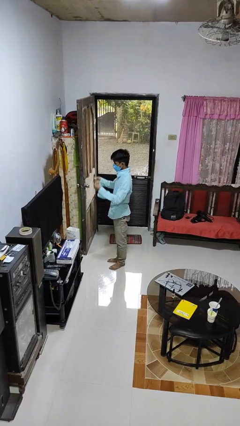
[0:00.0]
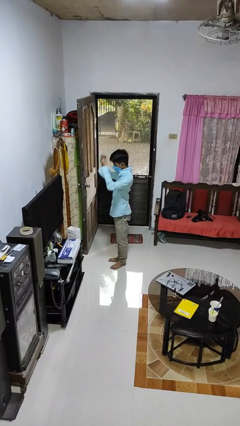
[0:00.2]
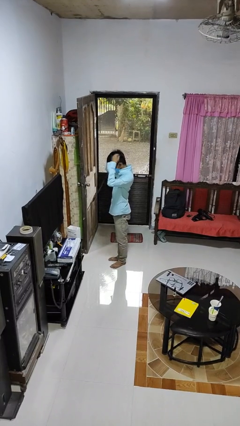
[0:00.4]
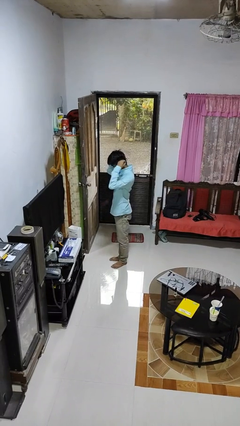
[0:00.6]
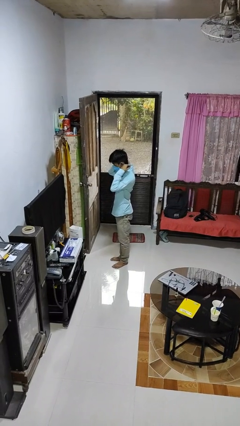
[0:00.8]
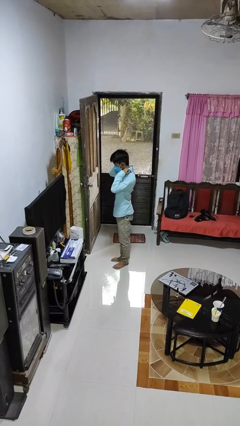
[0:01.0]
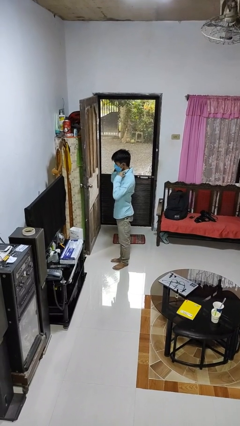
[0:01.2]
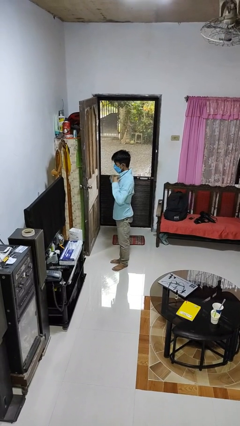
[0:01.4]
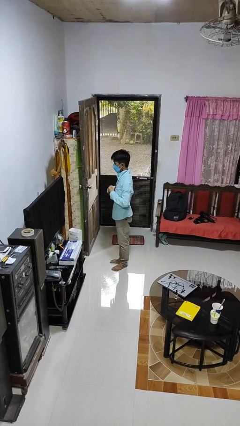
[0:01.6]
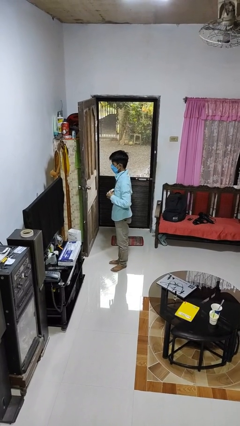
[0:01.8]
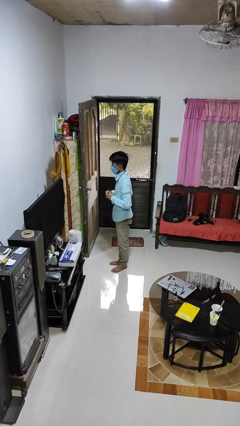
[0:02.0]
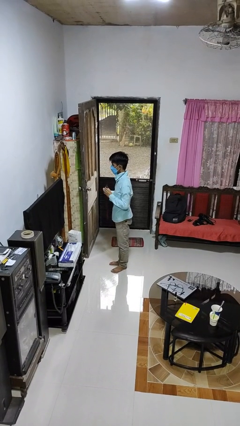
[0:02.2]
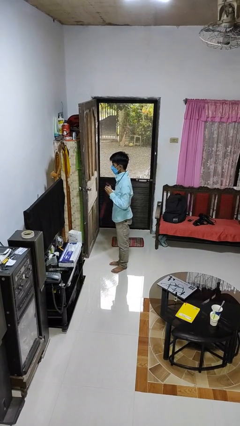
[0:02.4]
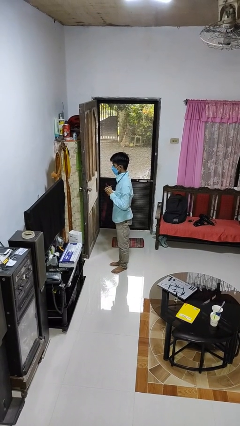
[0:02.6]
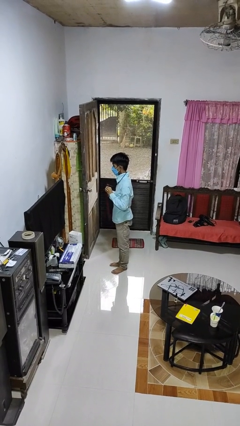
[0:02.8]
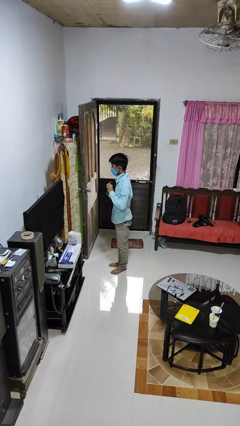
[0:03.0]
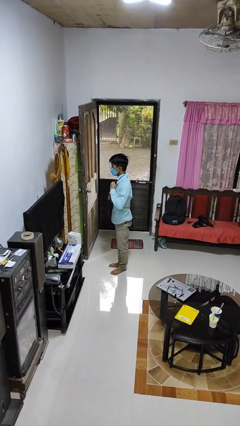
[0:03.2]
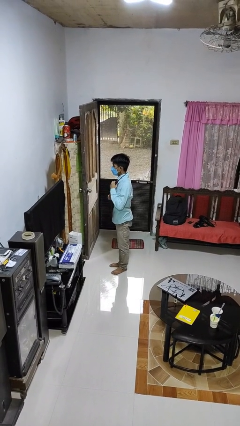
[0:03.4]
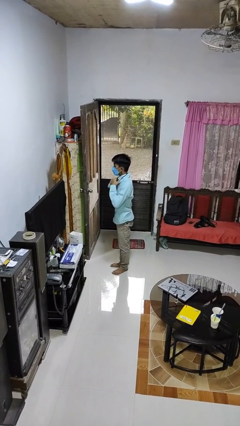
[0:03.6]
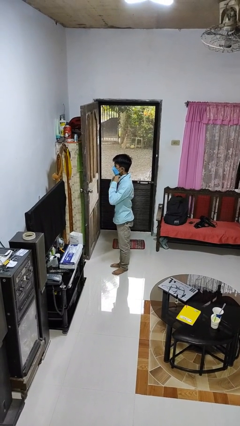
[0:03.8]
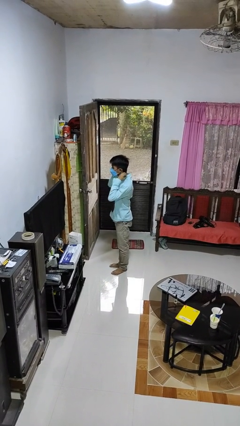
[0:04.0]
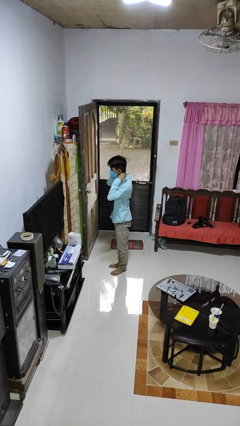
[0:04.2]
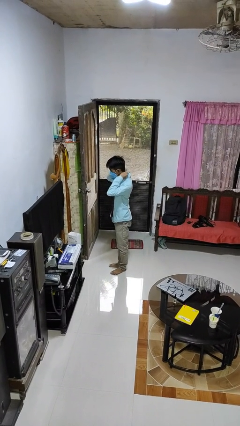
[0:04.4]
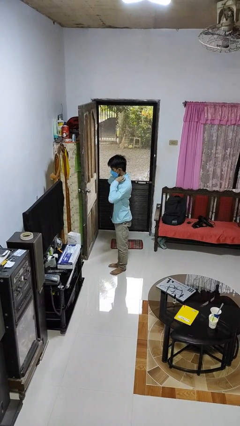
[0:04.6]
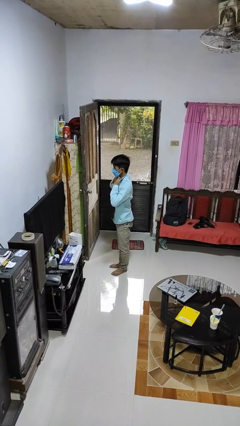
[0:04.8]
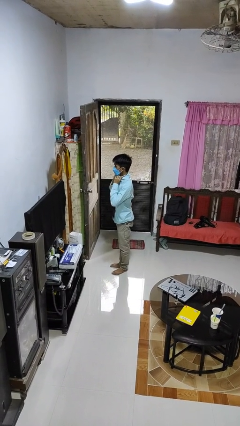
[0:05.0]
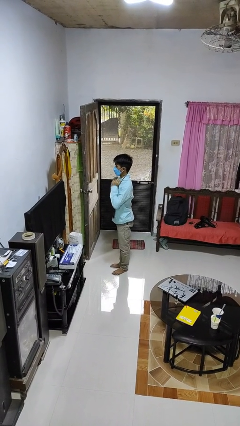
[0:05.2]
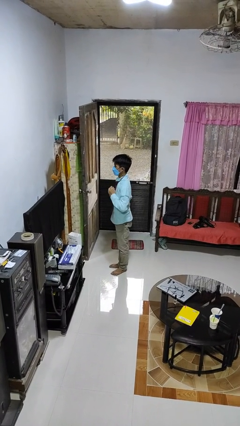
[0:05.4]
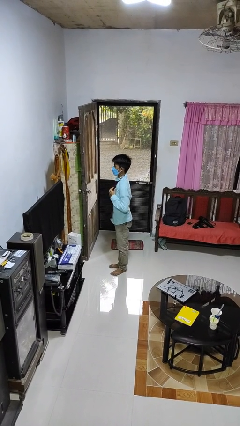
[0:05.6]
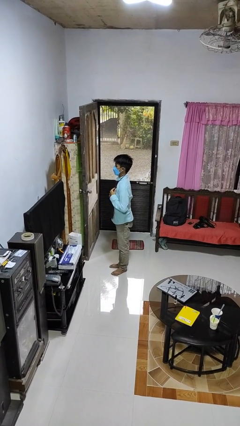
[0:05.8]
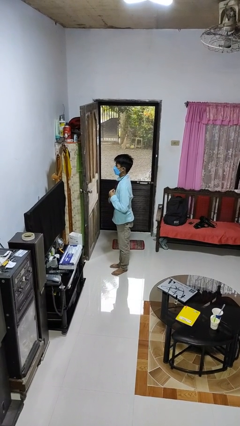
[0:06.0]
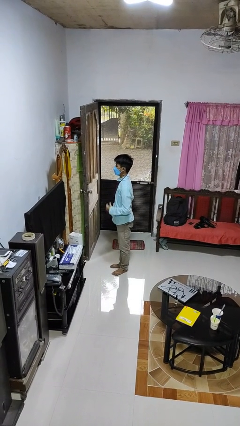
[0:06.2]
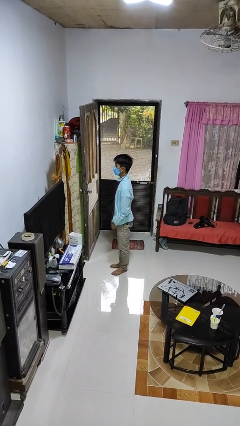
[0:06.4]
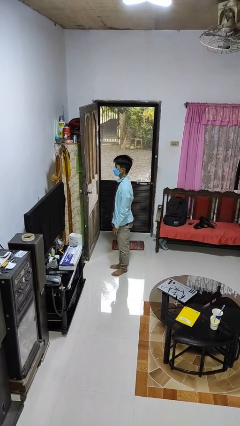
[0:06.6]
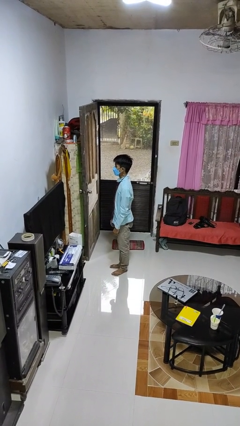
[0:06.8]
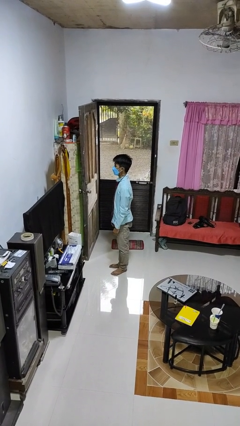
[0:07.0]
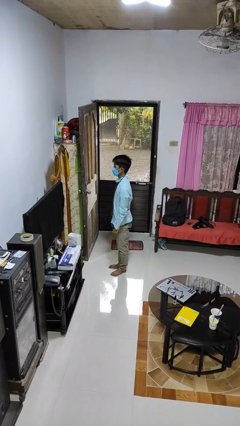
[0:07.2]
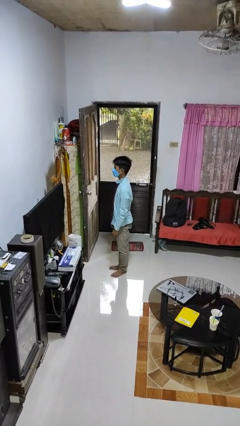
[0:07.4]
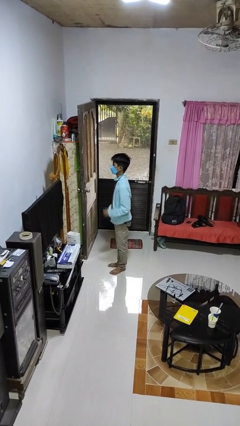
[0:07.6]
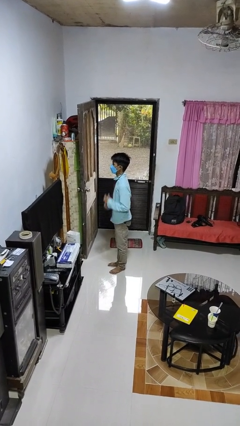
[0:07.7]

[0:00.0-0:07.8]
person puts on necktie

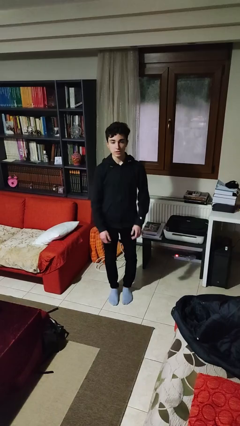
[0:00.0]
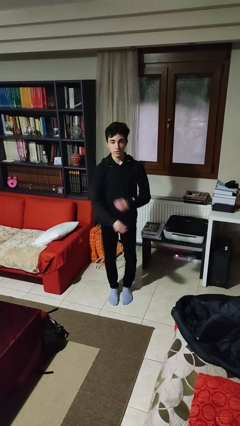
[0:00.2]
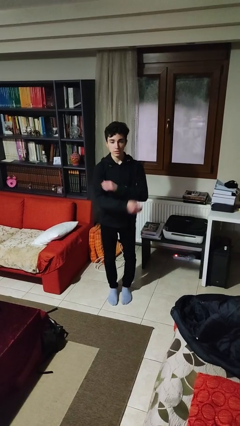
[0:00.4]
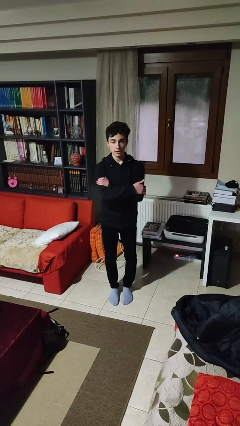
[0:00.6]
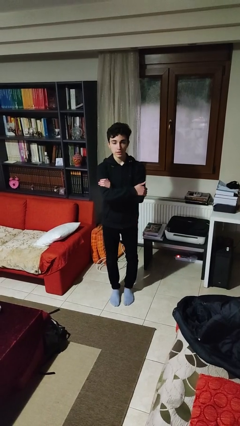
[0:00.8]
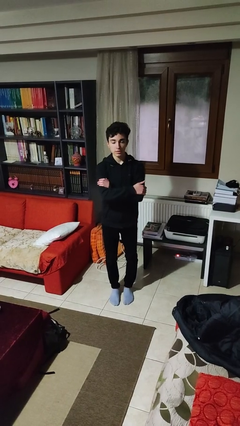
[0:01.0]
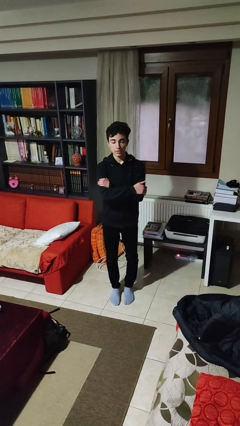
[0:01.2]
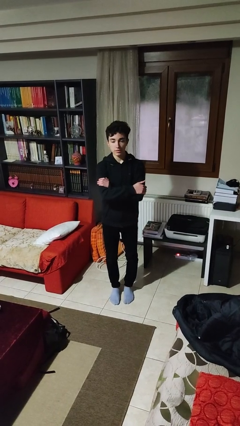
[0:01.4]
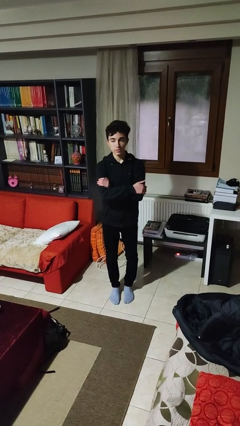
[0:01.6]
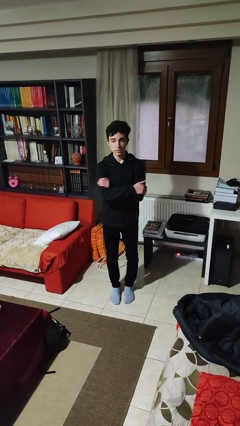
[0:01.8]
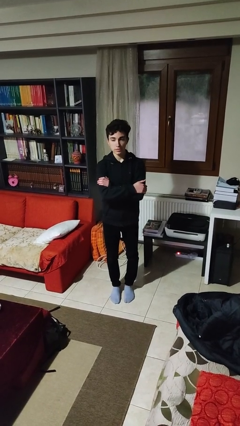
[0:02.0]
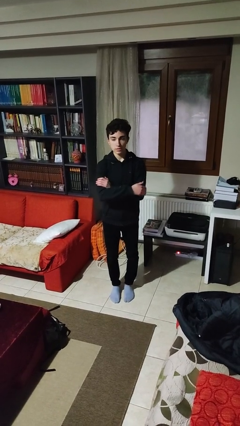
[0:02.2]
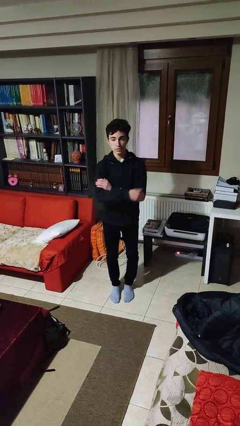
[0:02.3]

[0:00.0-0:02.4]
person crosses arms

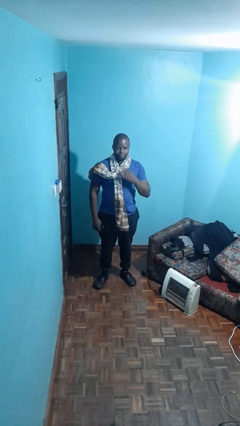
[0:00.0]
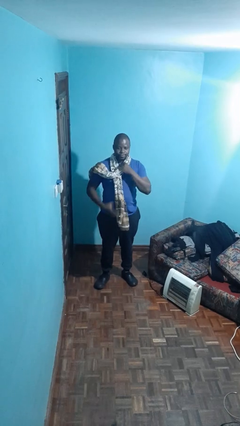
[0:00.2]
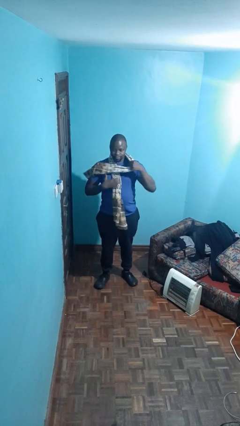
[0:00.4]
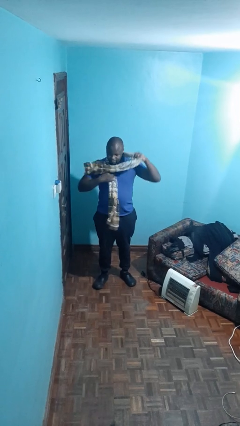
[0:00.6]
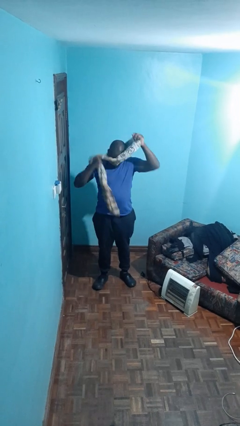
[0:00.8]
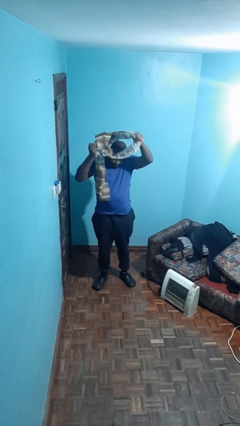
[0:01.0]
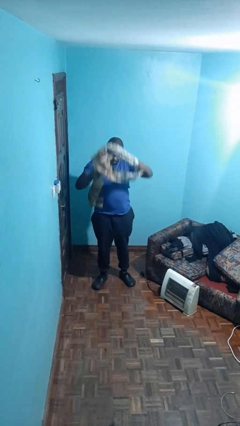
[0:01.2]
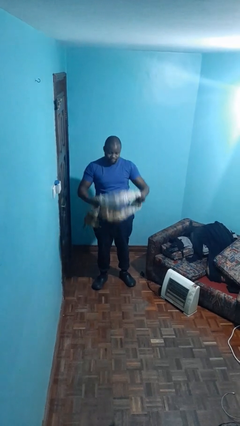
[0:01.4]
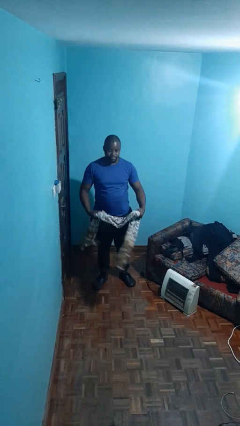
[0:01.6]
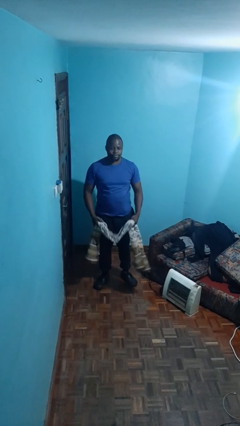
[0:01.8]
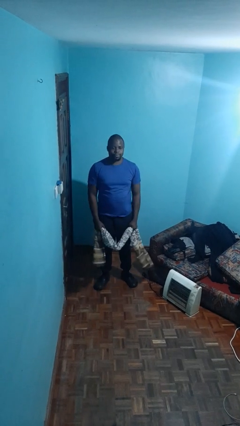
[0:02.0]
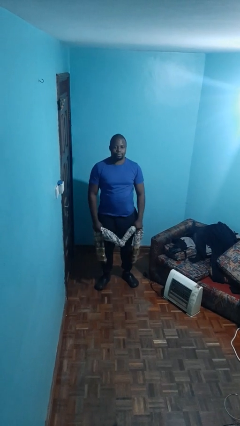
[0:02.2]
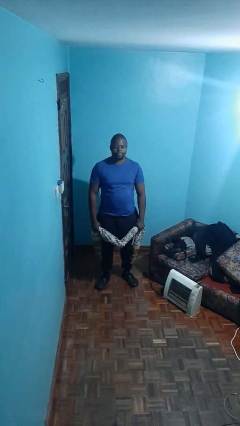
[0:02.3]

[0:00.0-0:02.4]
person takes off scarf

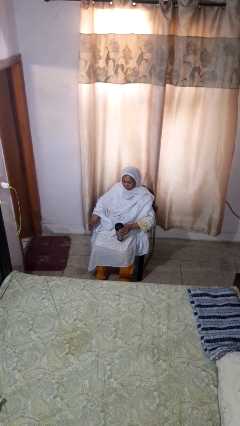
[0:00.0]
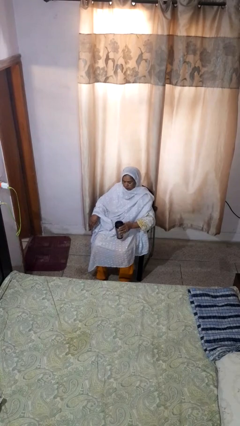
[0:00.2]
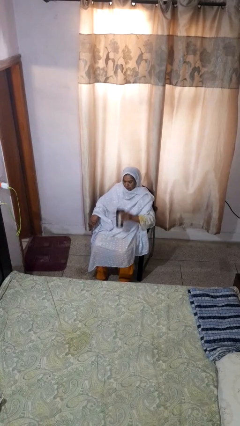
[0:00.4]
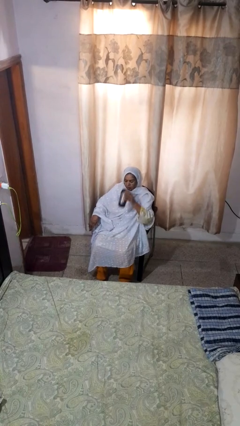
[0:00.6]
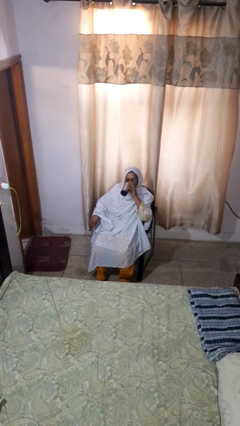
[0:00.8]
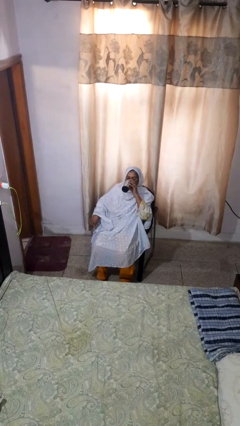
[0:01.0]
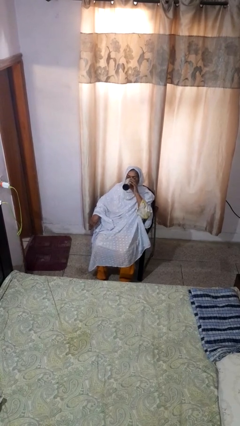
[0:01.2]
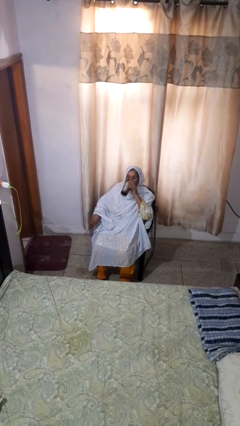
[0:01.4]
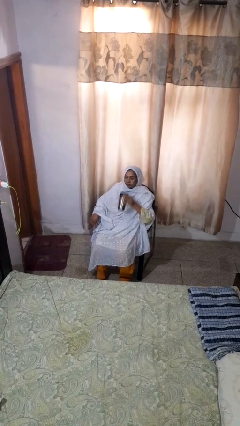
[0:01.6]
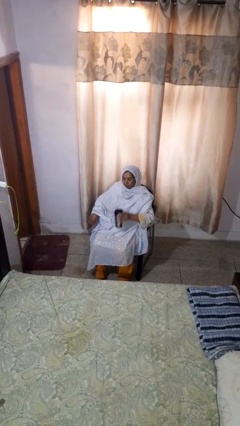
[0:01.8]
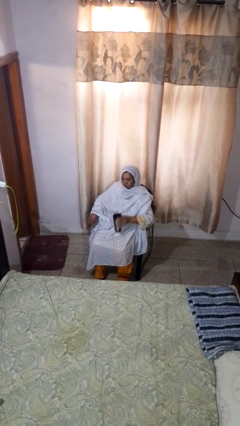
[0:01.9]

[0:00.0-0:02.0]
person drinks from beverage can

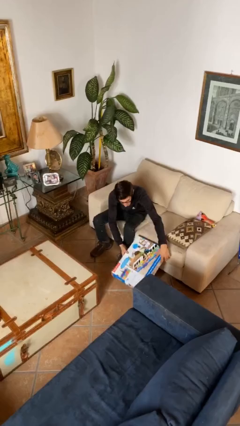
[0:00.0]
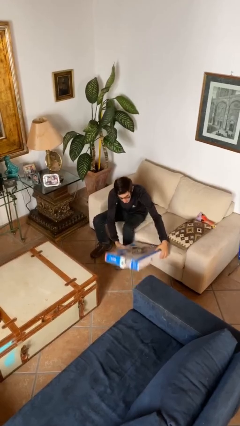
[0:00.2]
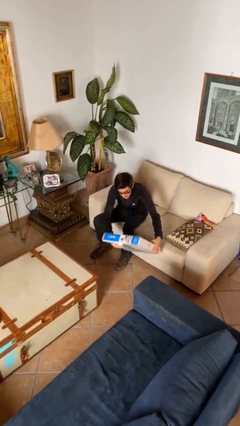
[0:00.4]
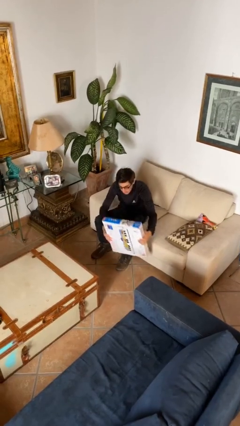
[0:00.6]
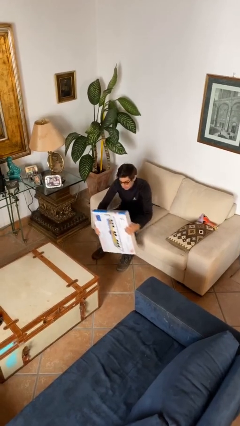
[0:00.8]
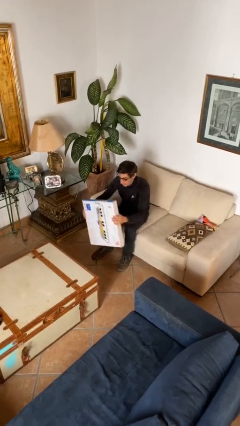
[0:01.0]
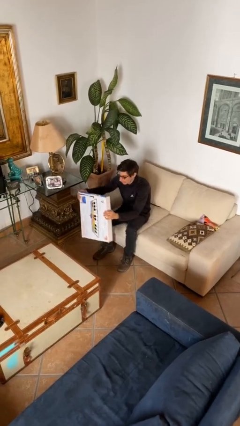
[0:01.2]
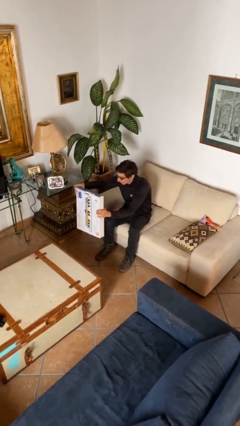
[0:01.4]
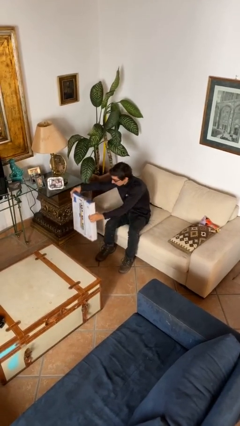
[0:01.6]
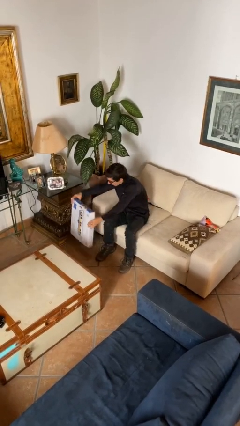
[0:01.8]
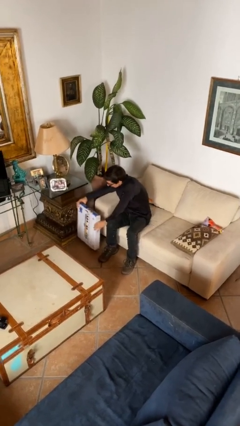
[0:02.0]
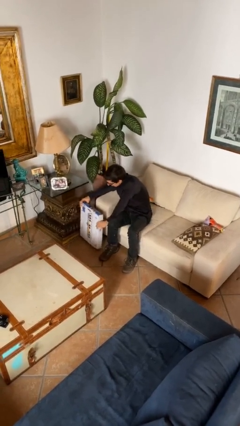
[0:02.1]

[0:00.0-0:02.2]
person picks up object from floor

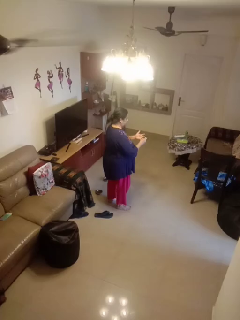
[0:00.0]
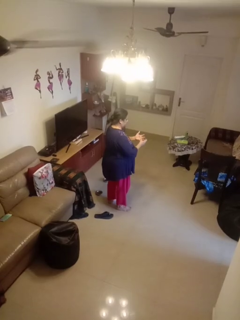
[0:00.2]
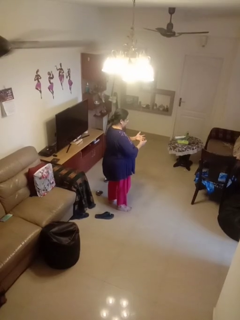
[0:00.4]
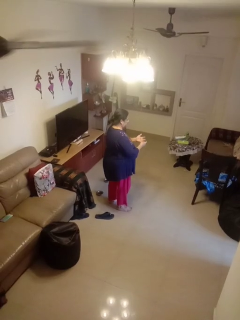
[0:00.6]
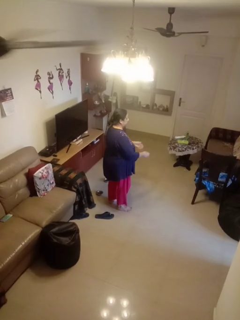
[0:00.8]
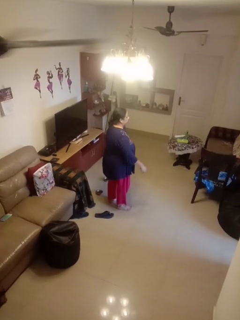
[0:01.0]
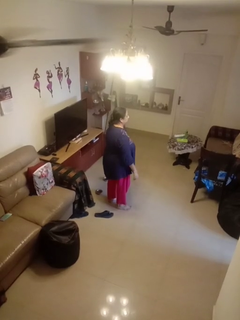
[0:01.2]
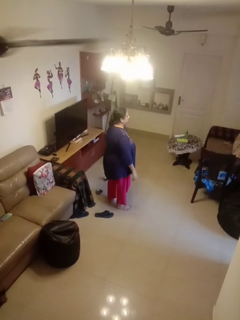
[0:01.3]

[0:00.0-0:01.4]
person puts on ring
